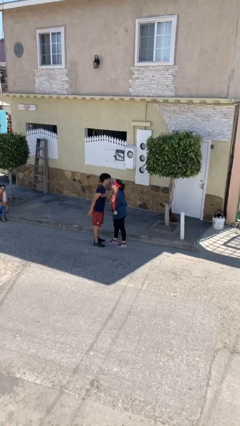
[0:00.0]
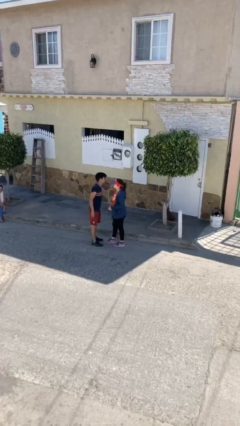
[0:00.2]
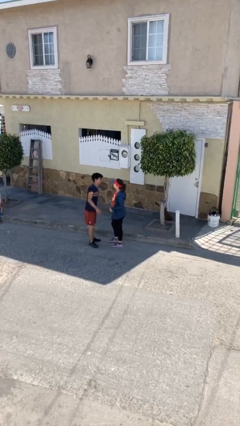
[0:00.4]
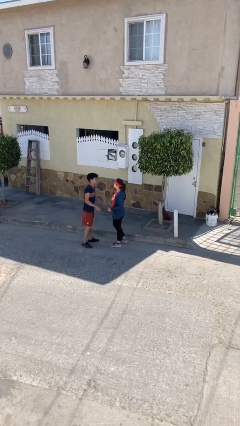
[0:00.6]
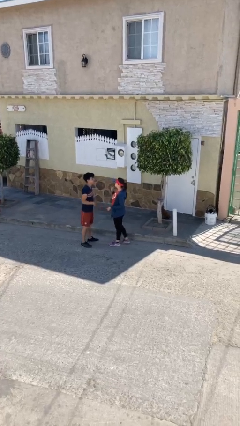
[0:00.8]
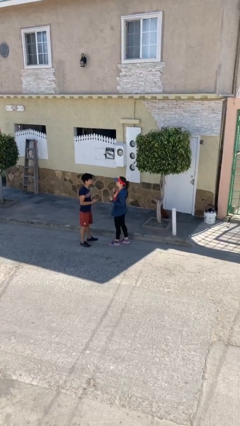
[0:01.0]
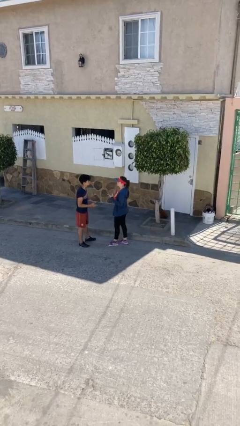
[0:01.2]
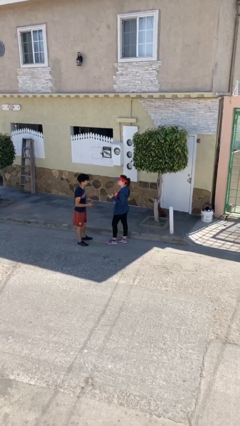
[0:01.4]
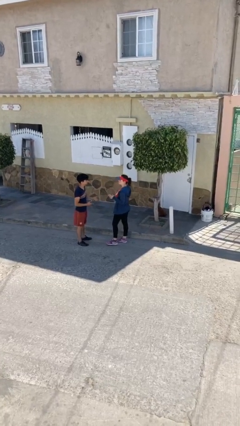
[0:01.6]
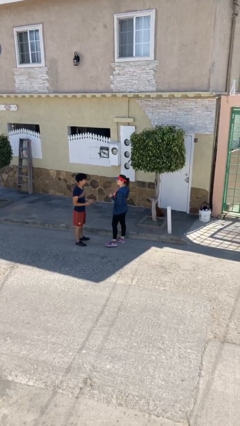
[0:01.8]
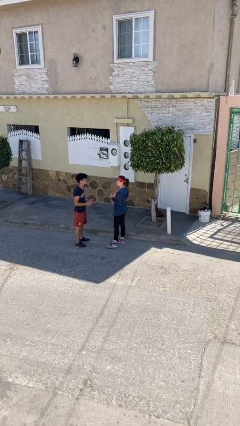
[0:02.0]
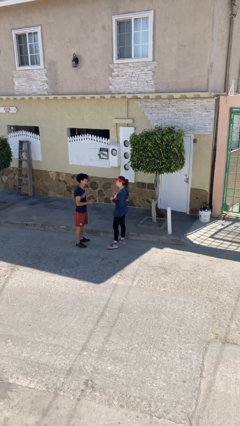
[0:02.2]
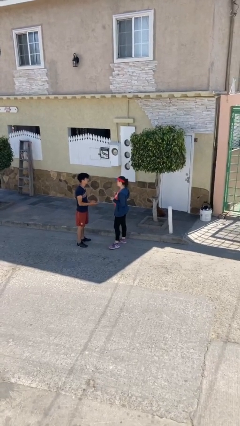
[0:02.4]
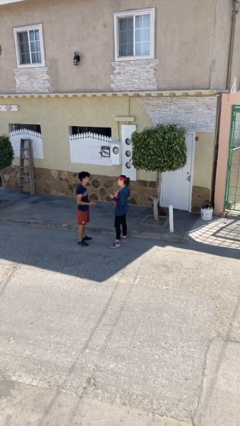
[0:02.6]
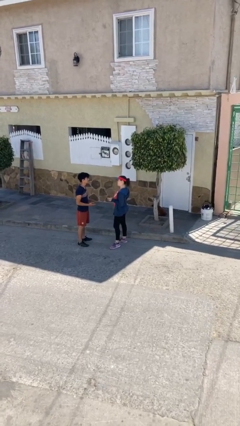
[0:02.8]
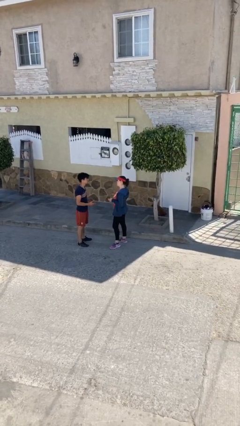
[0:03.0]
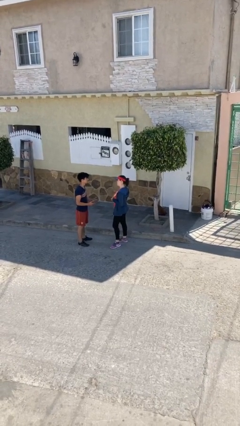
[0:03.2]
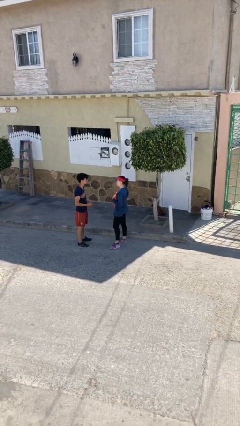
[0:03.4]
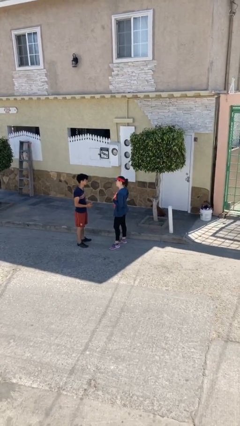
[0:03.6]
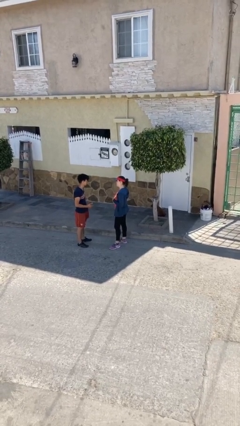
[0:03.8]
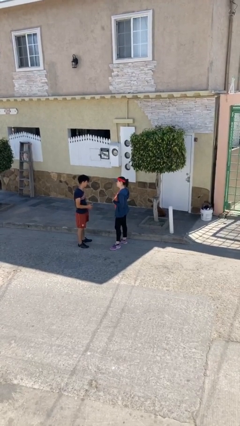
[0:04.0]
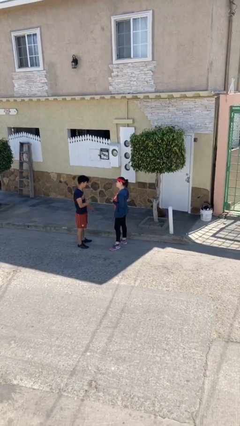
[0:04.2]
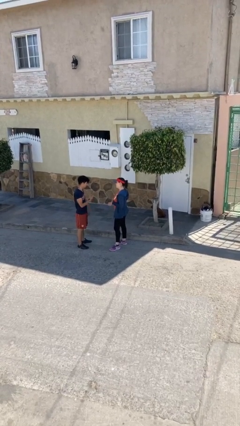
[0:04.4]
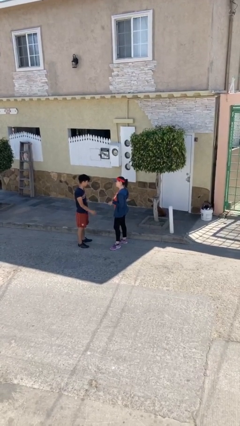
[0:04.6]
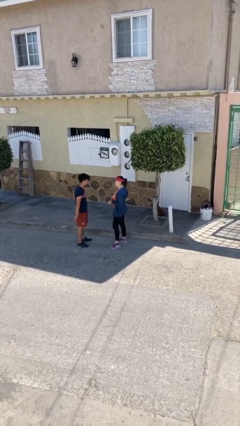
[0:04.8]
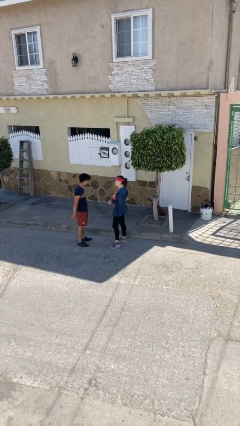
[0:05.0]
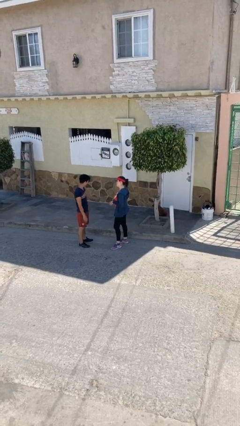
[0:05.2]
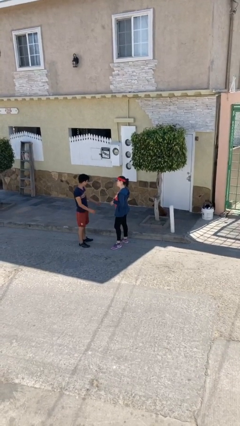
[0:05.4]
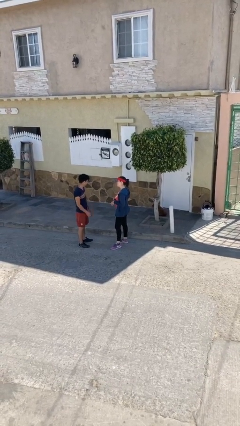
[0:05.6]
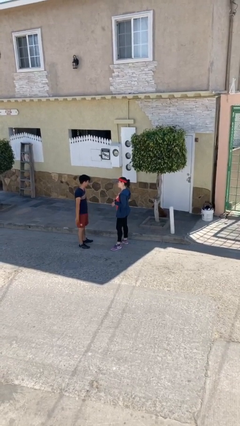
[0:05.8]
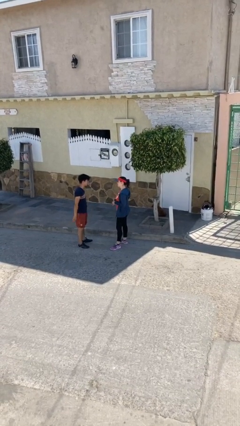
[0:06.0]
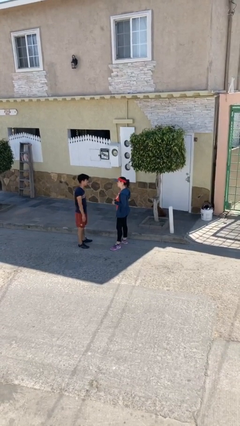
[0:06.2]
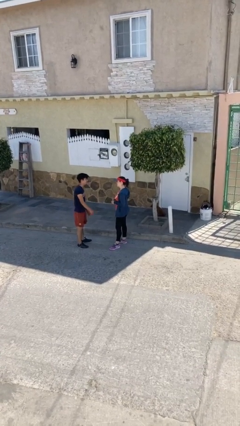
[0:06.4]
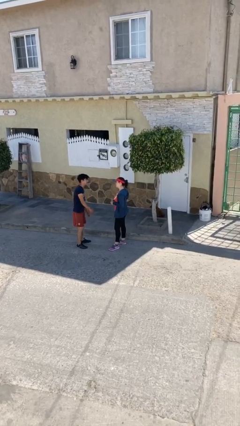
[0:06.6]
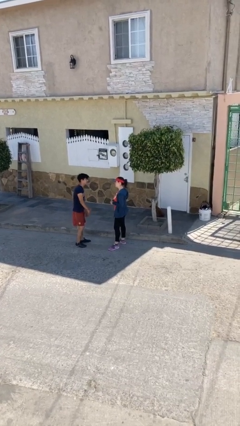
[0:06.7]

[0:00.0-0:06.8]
person talks to person

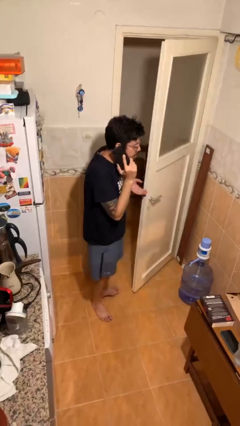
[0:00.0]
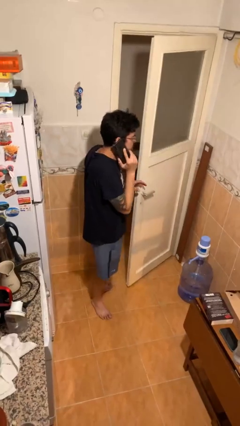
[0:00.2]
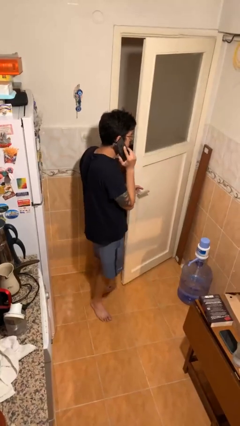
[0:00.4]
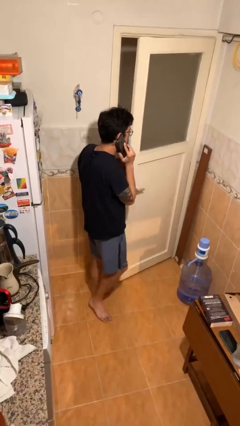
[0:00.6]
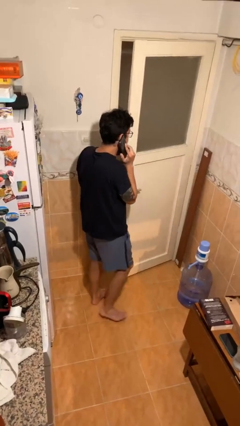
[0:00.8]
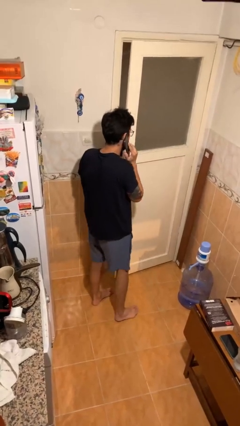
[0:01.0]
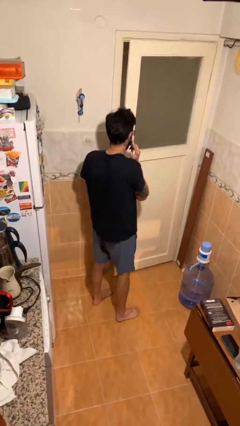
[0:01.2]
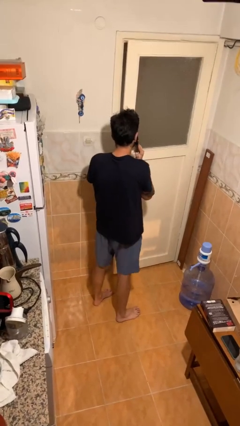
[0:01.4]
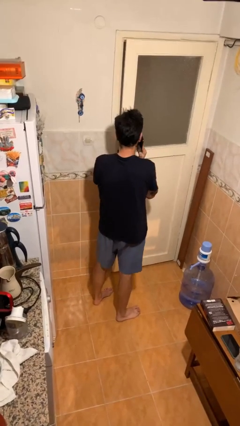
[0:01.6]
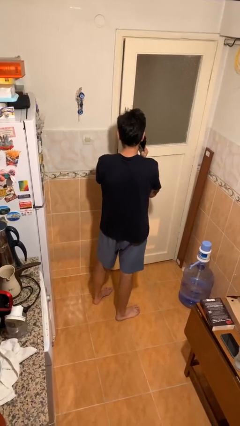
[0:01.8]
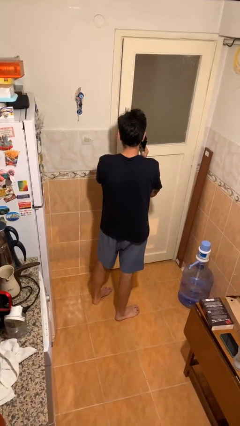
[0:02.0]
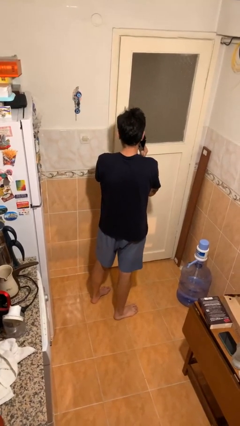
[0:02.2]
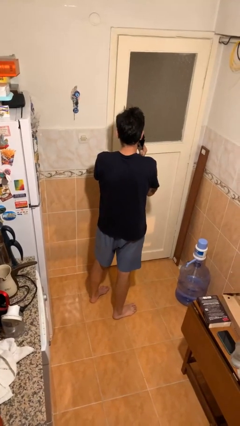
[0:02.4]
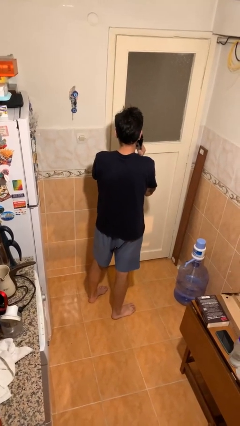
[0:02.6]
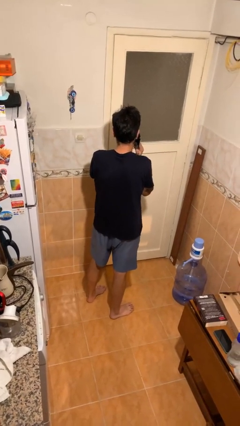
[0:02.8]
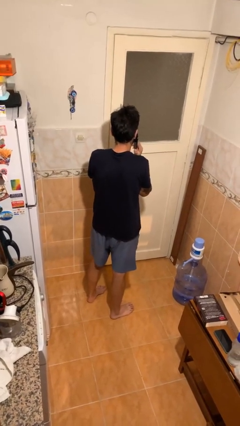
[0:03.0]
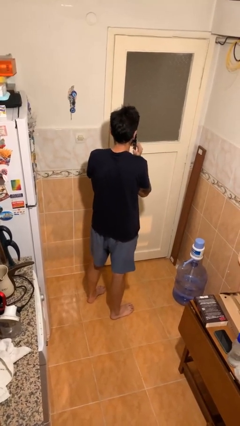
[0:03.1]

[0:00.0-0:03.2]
person closes facility door

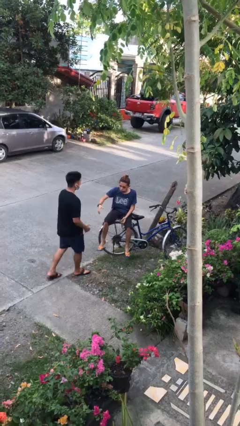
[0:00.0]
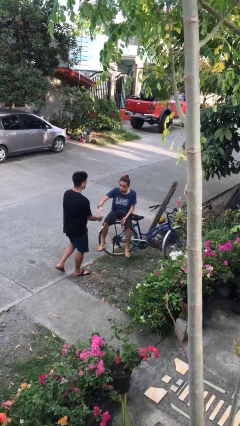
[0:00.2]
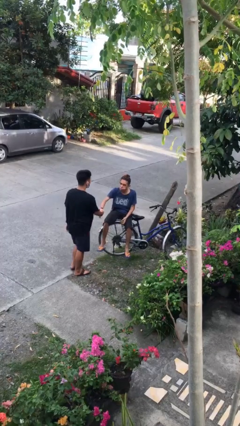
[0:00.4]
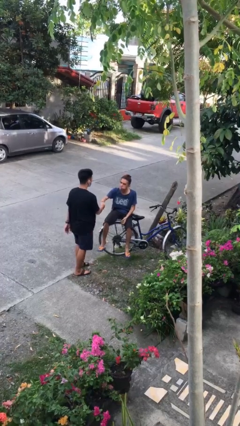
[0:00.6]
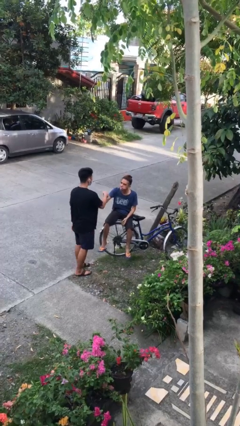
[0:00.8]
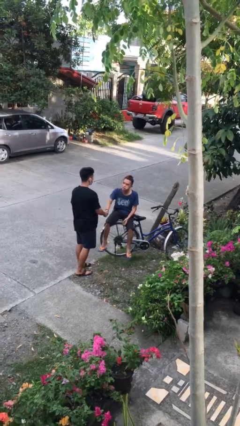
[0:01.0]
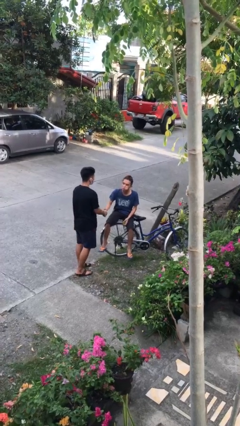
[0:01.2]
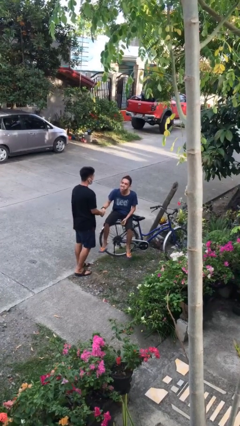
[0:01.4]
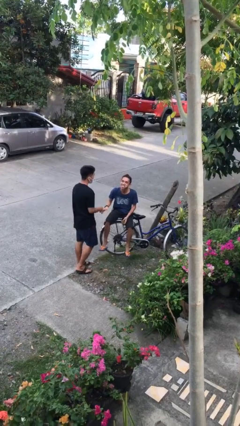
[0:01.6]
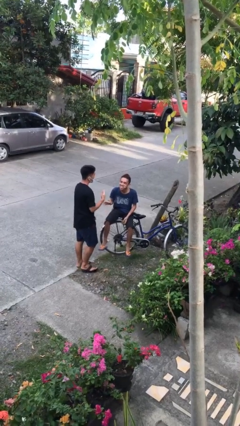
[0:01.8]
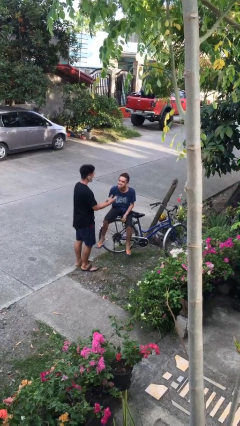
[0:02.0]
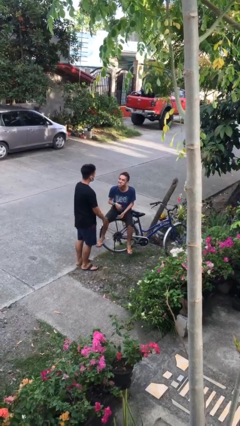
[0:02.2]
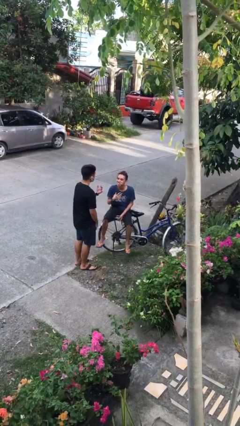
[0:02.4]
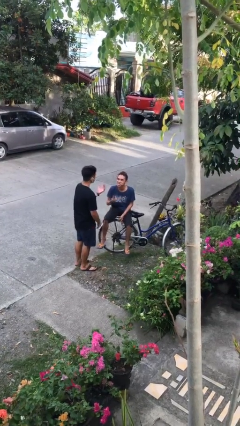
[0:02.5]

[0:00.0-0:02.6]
person shakes hand

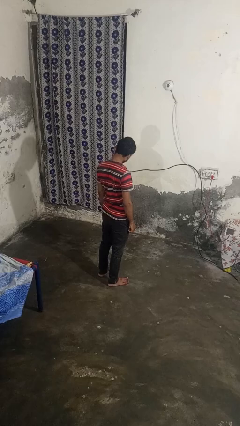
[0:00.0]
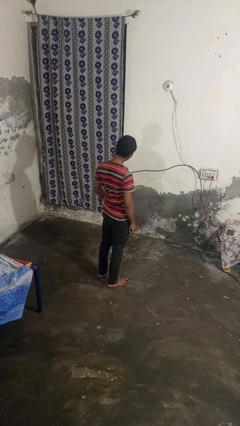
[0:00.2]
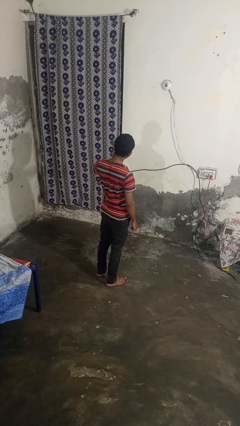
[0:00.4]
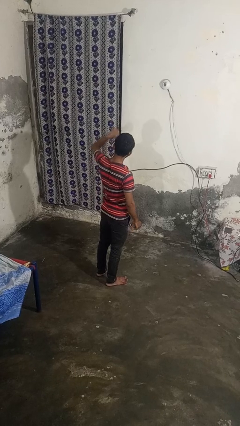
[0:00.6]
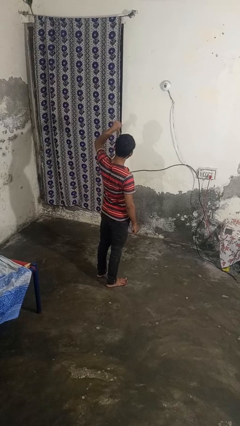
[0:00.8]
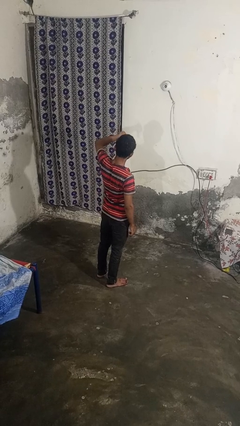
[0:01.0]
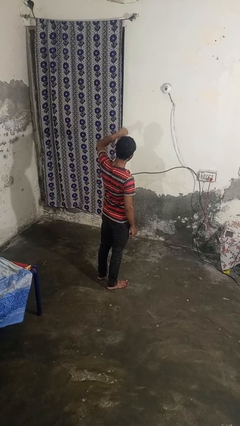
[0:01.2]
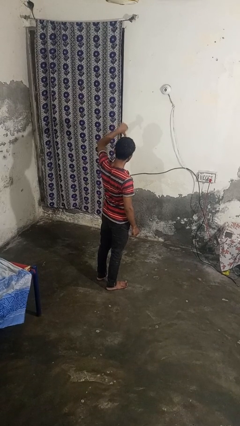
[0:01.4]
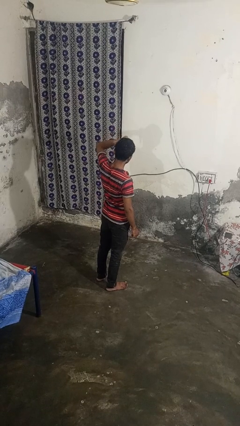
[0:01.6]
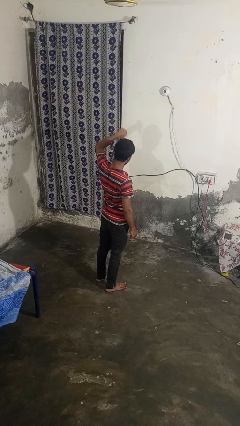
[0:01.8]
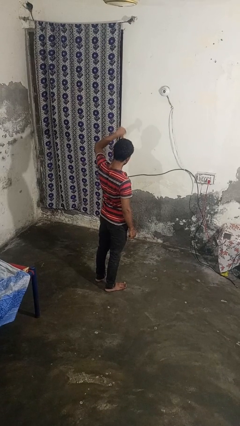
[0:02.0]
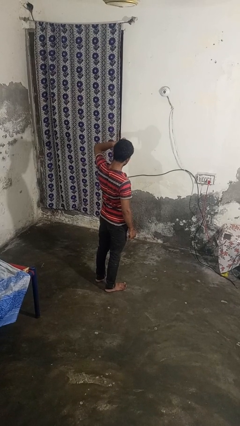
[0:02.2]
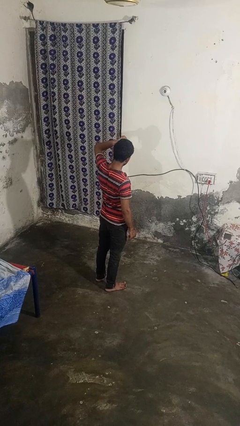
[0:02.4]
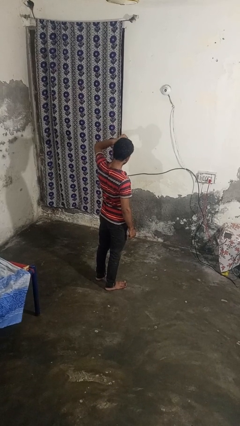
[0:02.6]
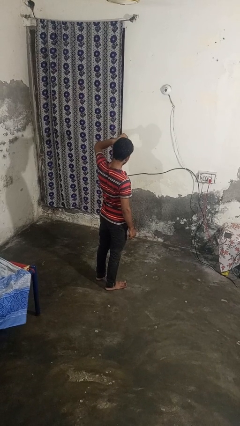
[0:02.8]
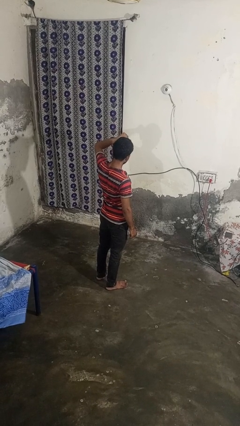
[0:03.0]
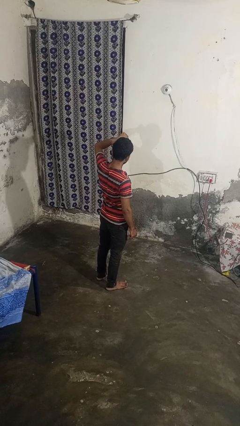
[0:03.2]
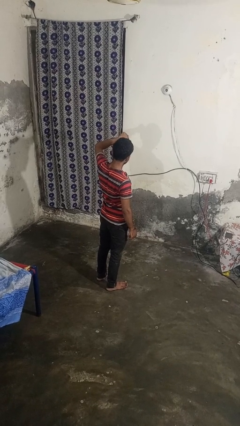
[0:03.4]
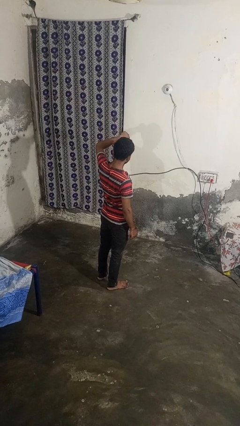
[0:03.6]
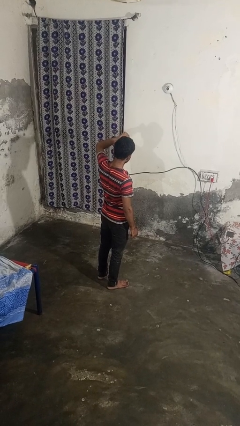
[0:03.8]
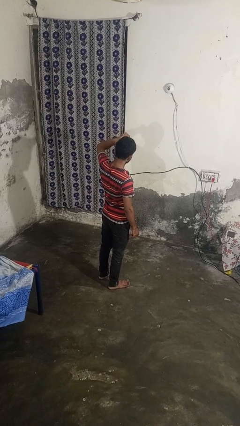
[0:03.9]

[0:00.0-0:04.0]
person gestures thumbs down

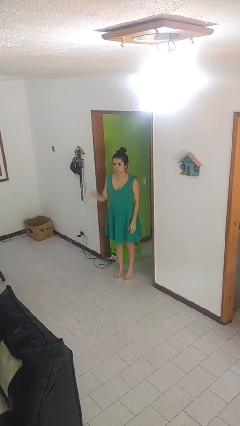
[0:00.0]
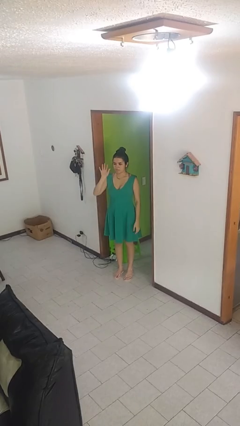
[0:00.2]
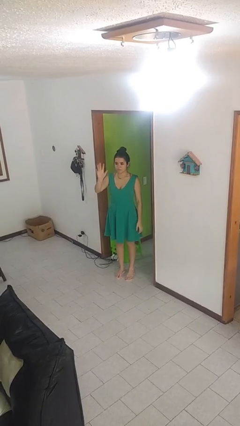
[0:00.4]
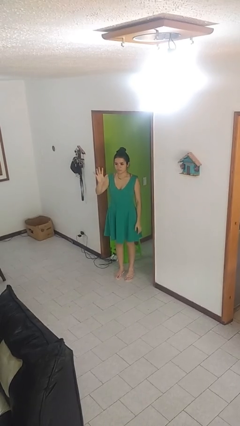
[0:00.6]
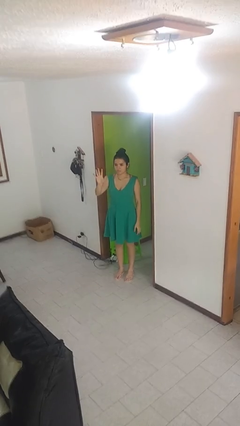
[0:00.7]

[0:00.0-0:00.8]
person gestures number five

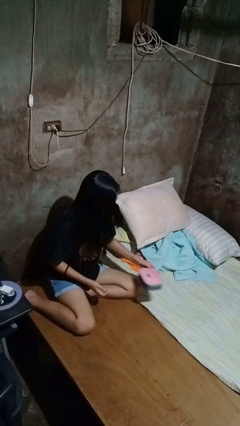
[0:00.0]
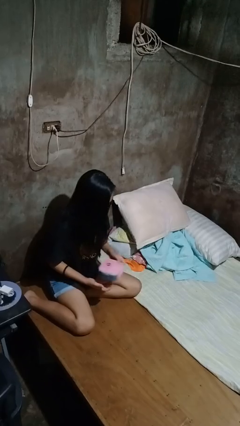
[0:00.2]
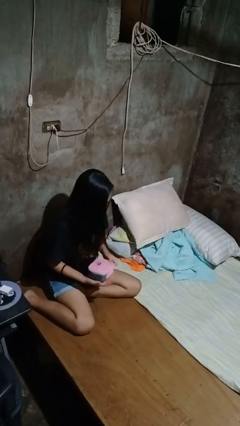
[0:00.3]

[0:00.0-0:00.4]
person picks up object from bed
